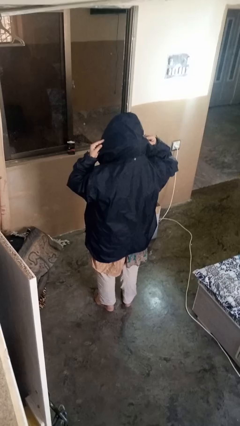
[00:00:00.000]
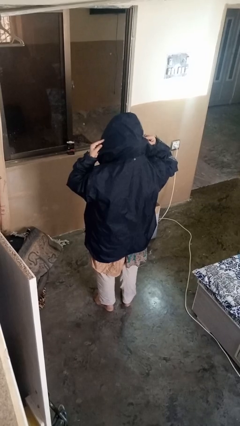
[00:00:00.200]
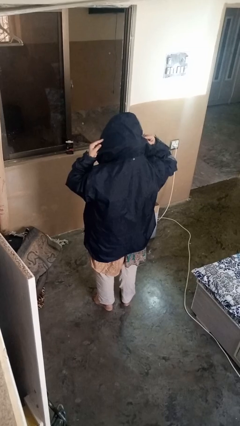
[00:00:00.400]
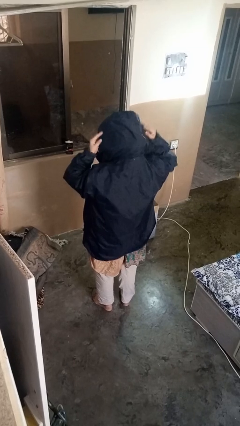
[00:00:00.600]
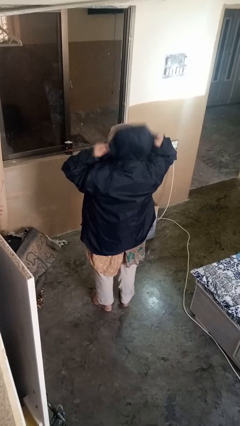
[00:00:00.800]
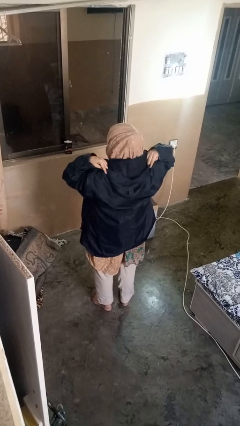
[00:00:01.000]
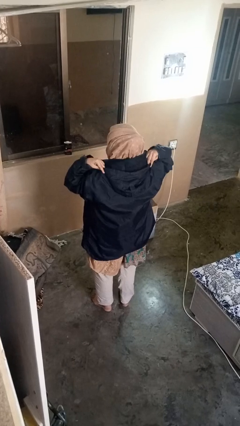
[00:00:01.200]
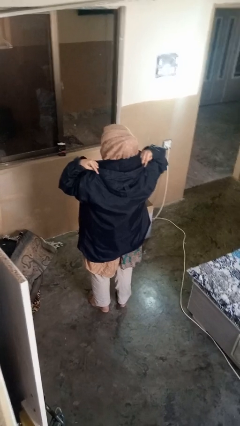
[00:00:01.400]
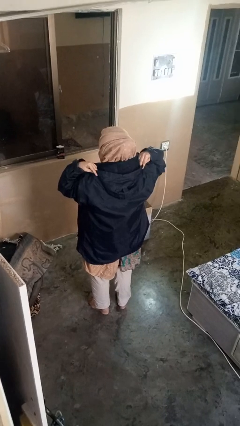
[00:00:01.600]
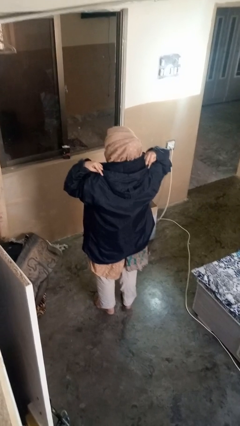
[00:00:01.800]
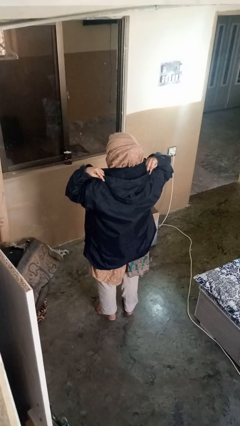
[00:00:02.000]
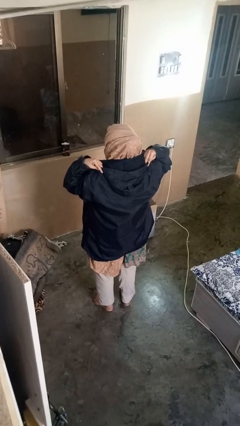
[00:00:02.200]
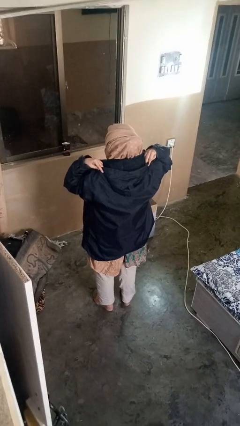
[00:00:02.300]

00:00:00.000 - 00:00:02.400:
person takes off hat

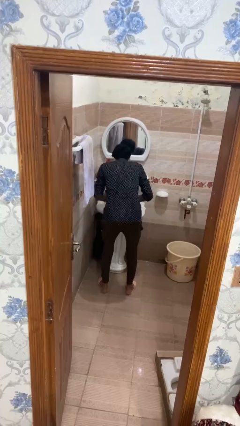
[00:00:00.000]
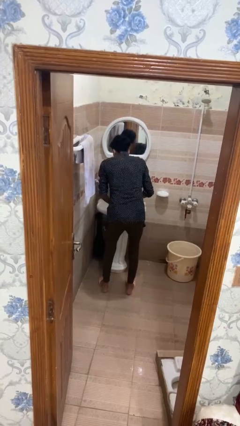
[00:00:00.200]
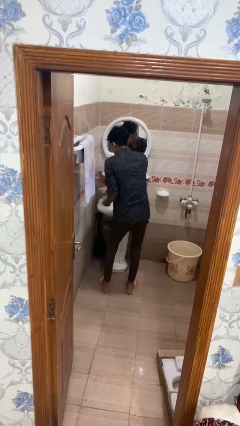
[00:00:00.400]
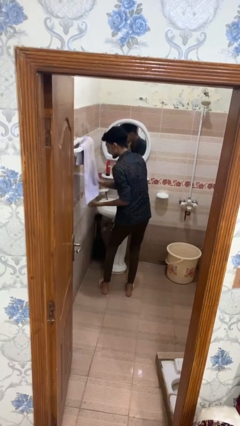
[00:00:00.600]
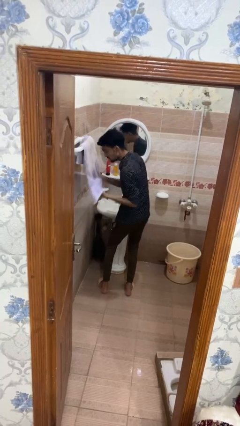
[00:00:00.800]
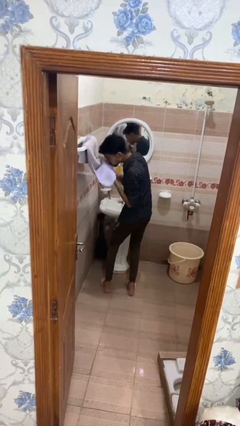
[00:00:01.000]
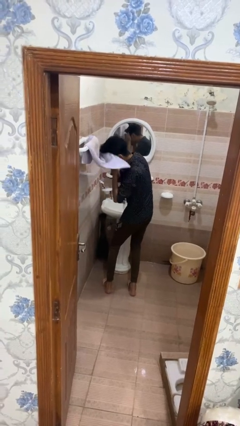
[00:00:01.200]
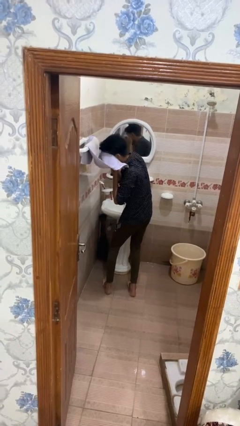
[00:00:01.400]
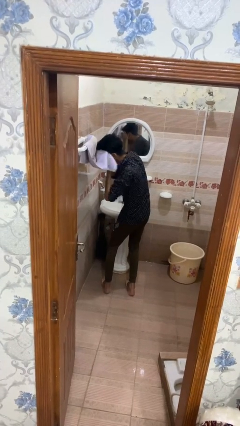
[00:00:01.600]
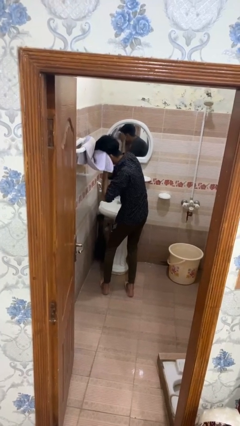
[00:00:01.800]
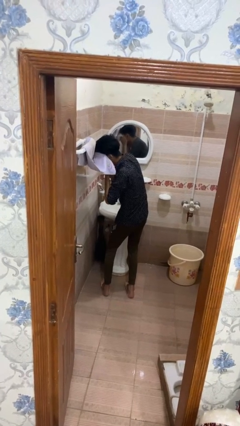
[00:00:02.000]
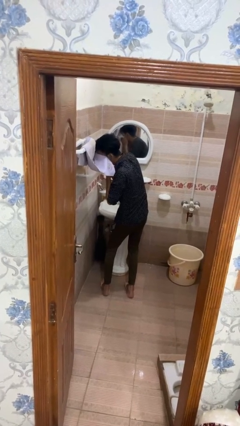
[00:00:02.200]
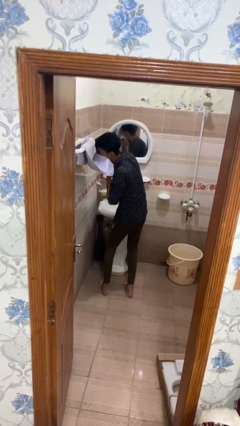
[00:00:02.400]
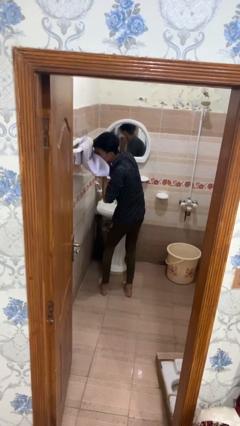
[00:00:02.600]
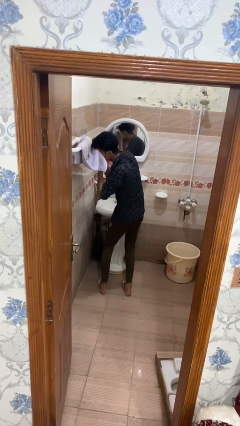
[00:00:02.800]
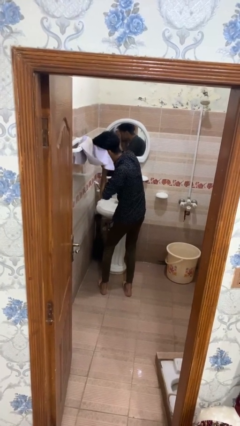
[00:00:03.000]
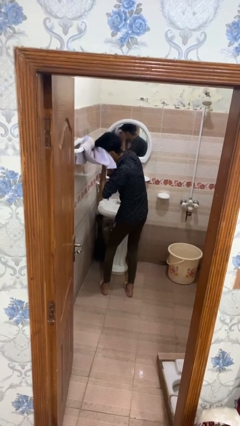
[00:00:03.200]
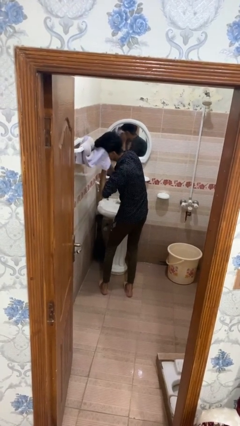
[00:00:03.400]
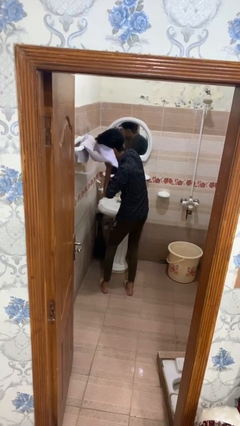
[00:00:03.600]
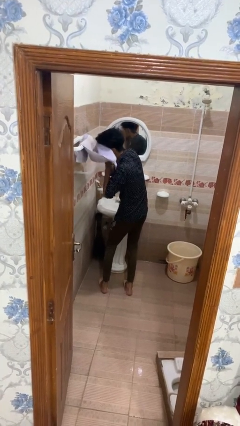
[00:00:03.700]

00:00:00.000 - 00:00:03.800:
person dries face with towel

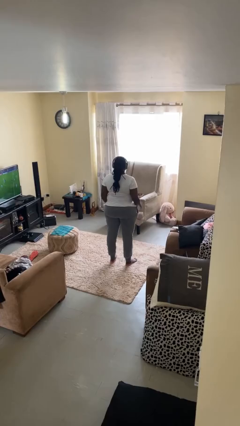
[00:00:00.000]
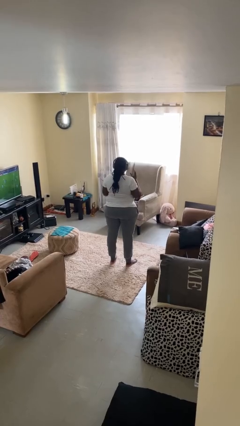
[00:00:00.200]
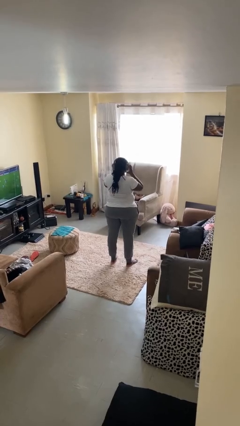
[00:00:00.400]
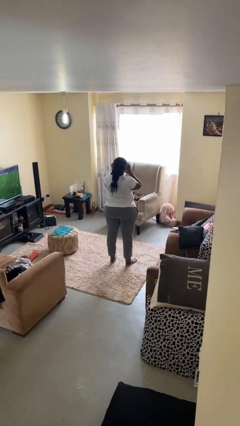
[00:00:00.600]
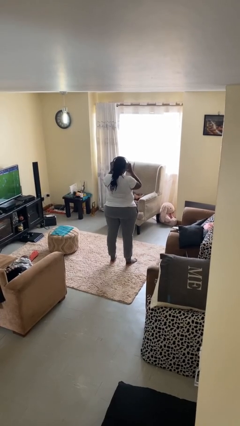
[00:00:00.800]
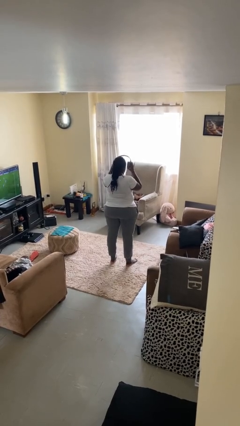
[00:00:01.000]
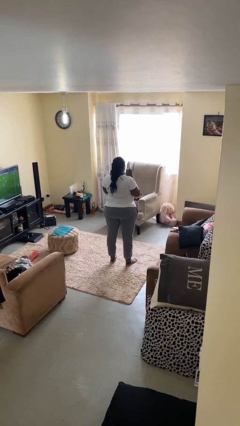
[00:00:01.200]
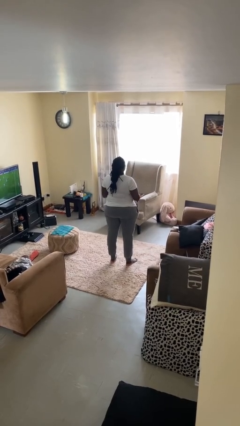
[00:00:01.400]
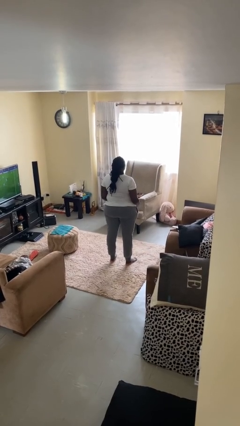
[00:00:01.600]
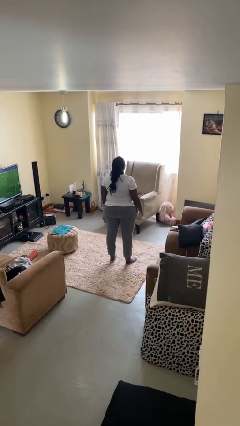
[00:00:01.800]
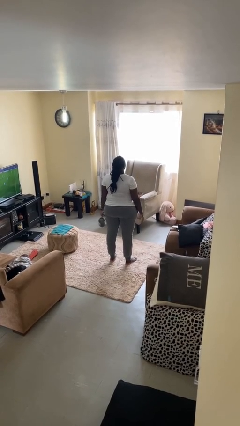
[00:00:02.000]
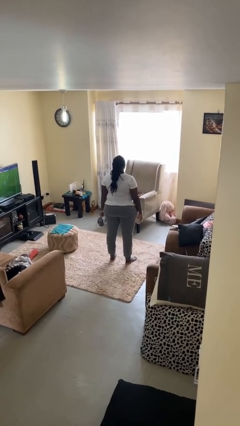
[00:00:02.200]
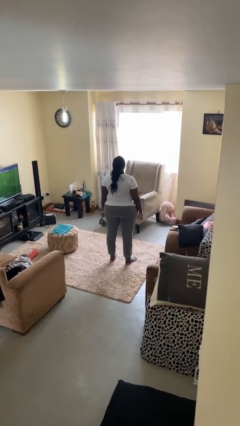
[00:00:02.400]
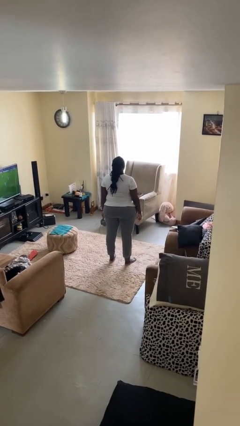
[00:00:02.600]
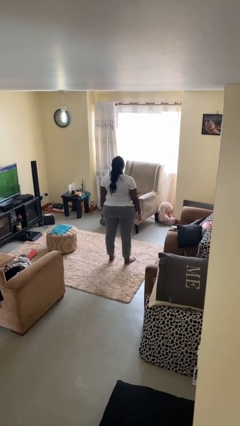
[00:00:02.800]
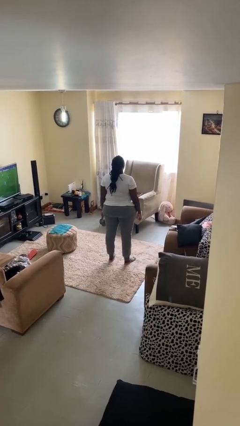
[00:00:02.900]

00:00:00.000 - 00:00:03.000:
person takes off headphones

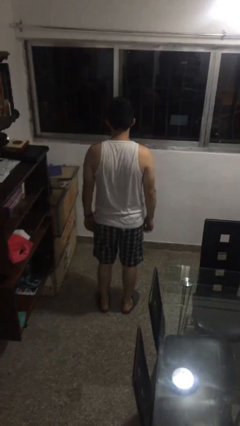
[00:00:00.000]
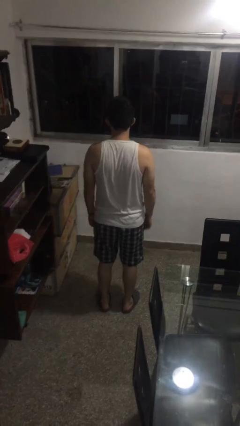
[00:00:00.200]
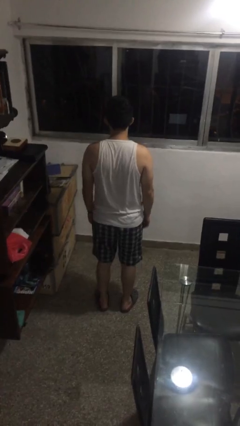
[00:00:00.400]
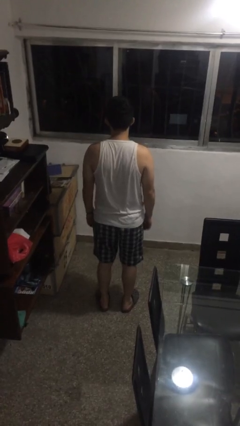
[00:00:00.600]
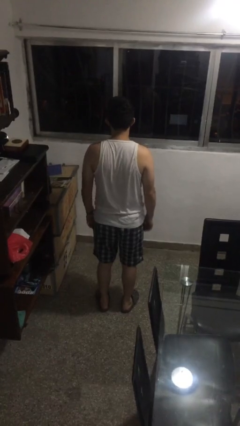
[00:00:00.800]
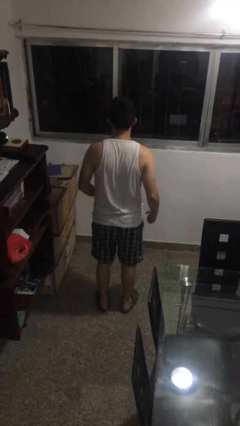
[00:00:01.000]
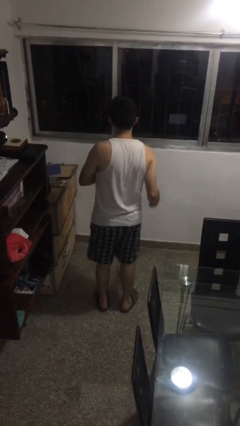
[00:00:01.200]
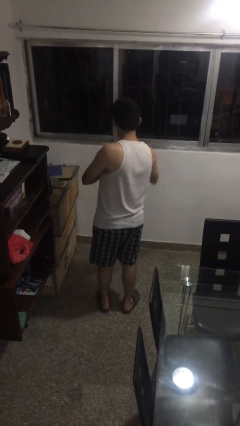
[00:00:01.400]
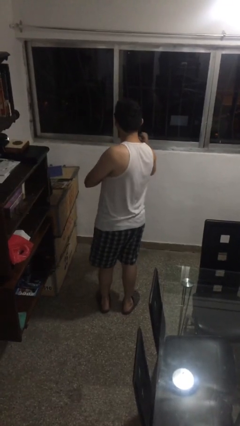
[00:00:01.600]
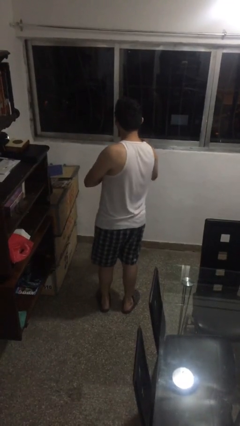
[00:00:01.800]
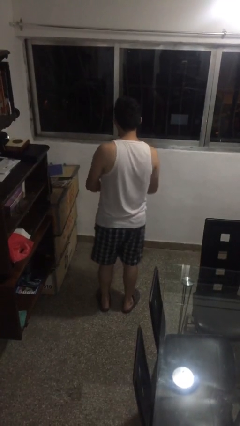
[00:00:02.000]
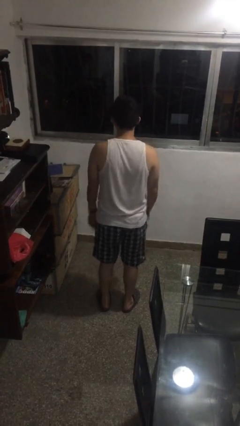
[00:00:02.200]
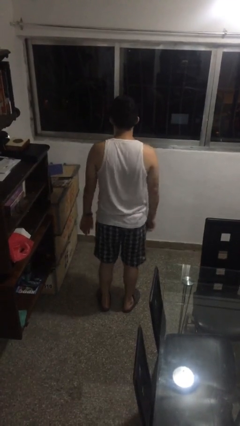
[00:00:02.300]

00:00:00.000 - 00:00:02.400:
person punches

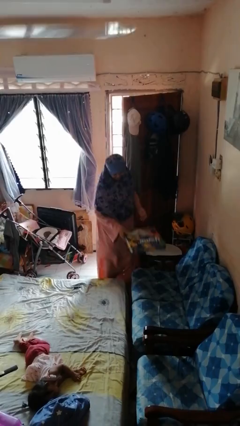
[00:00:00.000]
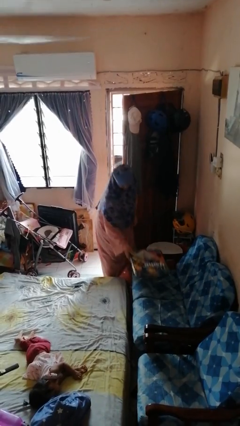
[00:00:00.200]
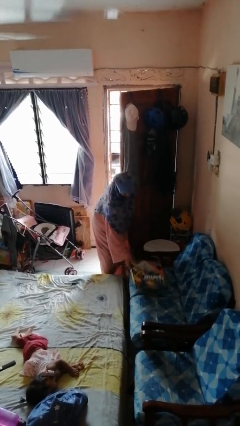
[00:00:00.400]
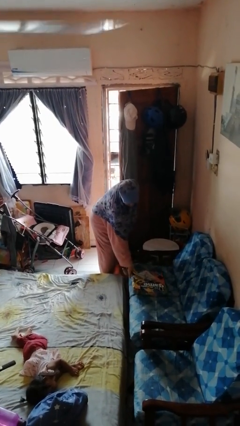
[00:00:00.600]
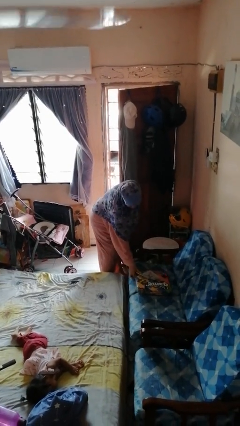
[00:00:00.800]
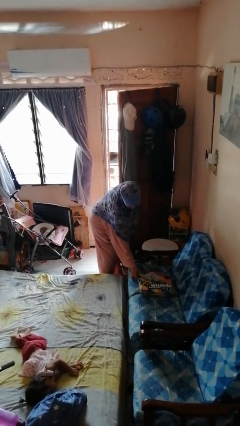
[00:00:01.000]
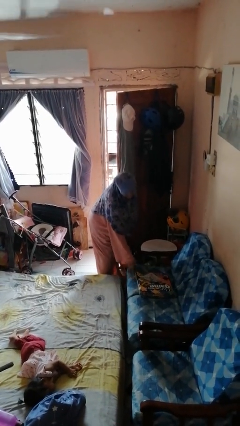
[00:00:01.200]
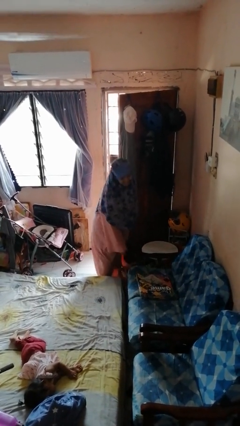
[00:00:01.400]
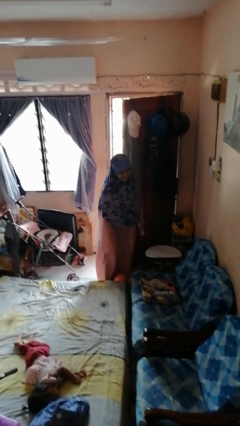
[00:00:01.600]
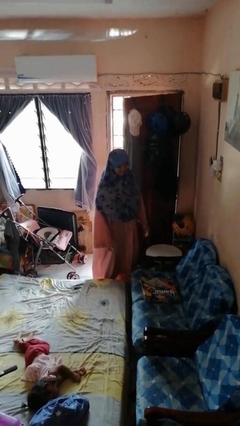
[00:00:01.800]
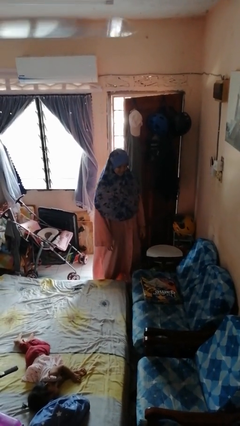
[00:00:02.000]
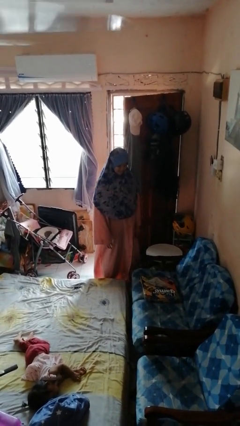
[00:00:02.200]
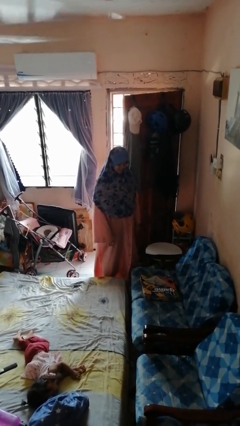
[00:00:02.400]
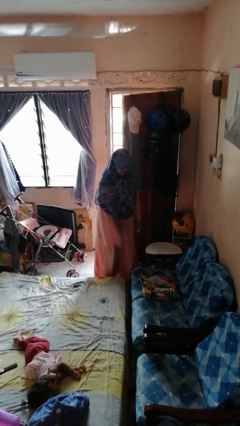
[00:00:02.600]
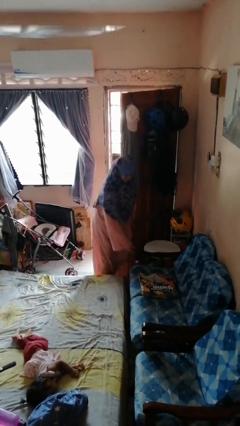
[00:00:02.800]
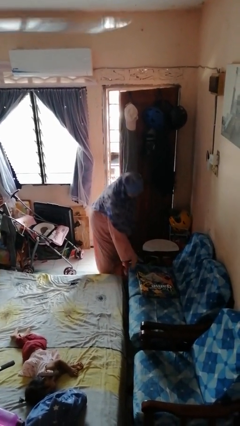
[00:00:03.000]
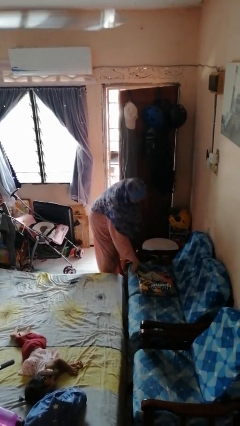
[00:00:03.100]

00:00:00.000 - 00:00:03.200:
person picks up object from couch

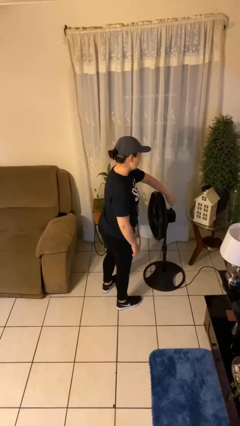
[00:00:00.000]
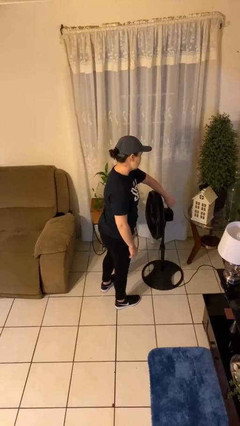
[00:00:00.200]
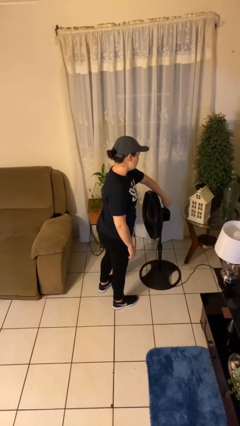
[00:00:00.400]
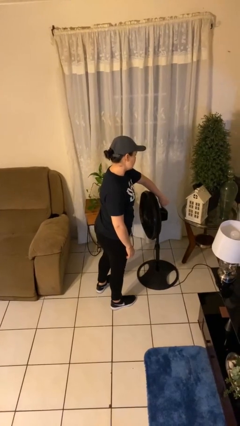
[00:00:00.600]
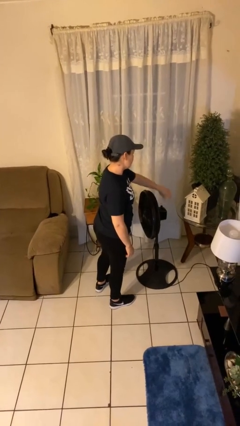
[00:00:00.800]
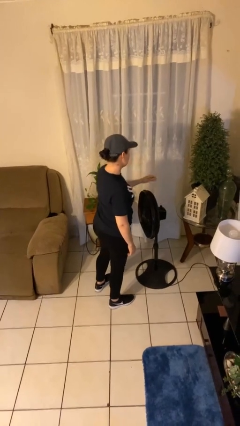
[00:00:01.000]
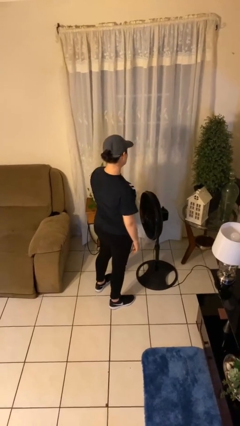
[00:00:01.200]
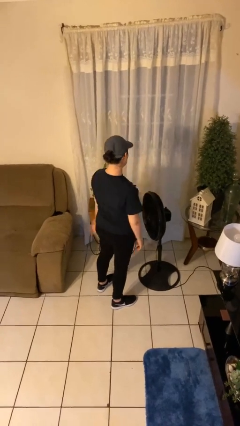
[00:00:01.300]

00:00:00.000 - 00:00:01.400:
person turns off fan

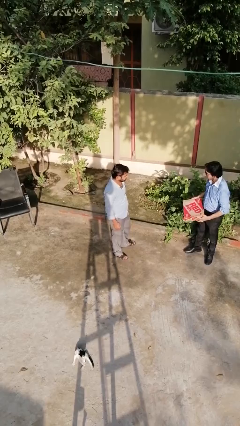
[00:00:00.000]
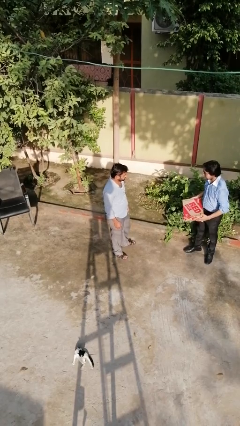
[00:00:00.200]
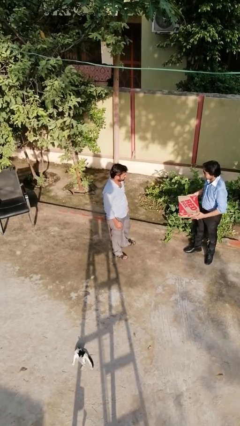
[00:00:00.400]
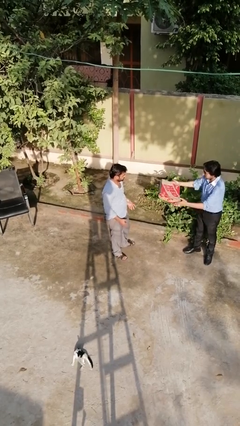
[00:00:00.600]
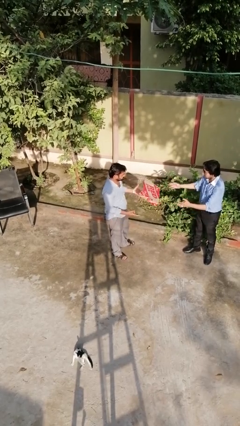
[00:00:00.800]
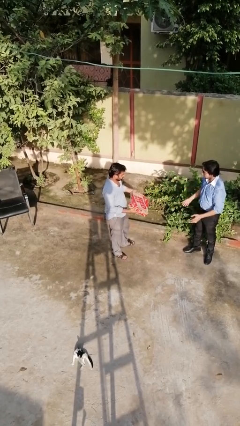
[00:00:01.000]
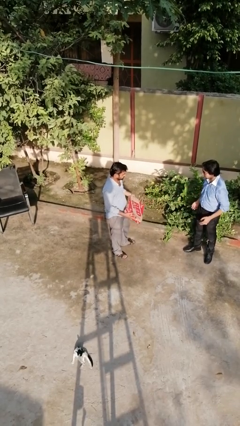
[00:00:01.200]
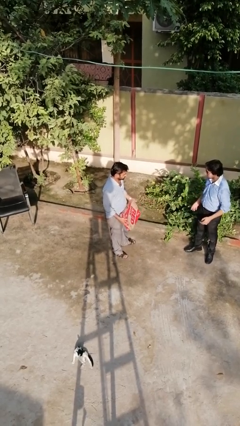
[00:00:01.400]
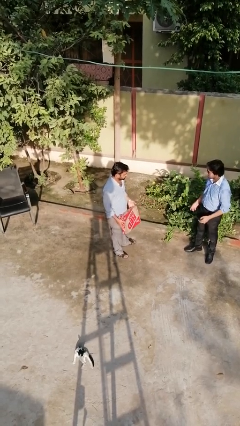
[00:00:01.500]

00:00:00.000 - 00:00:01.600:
person catches object from person
